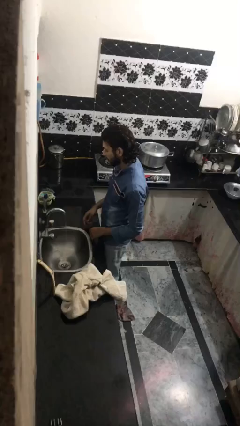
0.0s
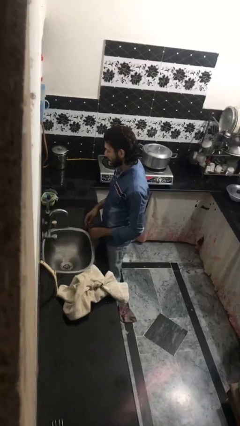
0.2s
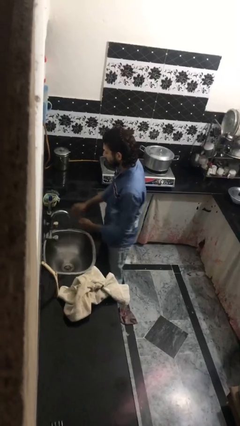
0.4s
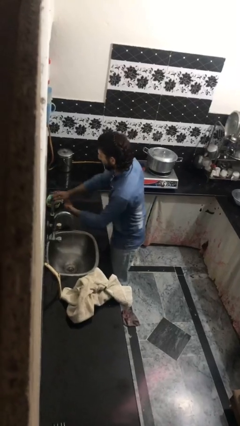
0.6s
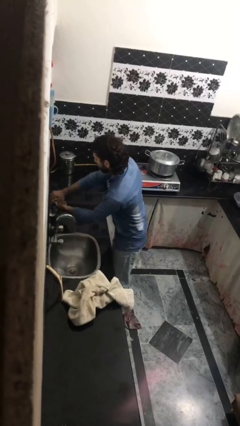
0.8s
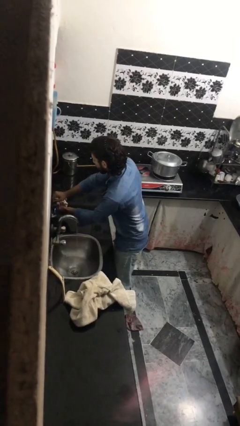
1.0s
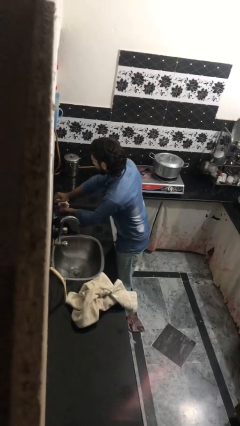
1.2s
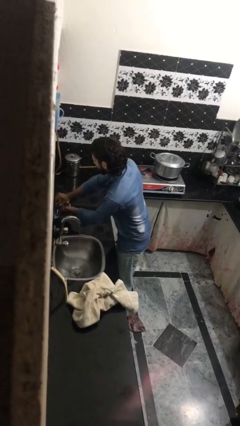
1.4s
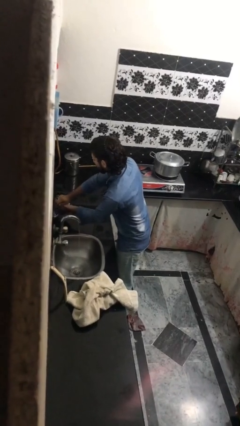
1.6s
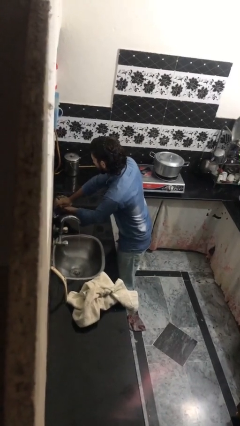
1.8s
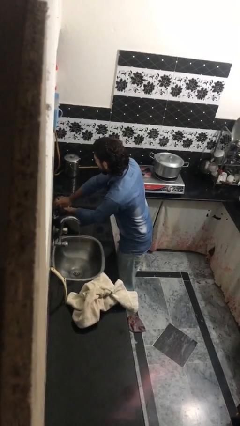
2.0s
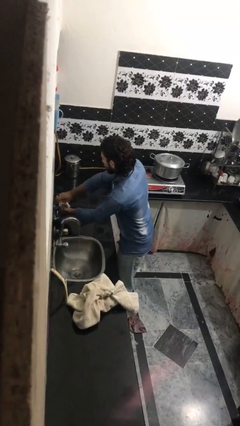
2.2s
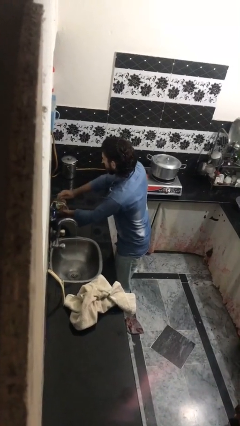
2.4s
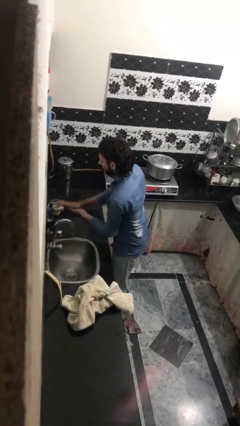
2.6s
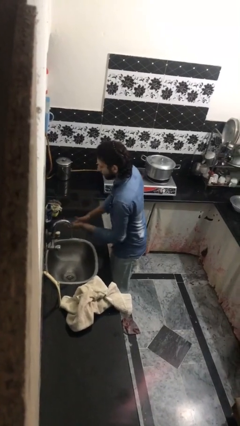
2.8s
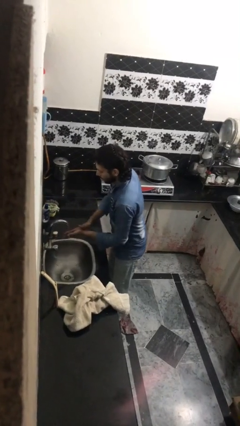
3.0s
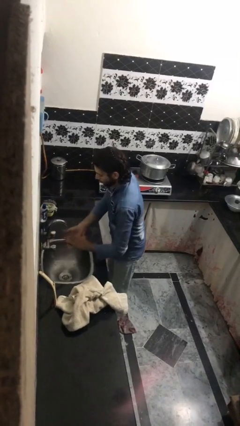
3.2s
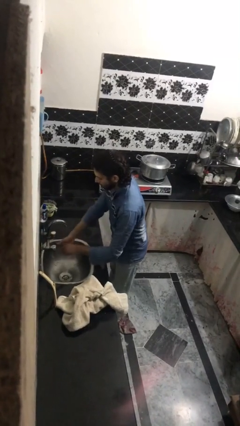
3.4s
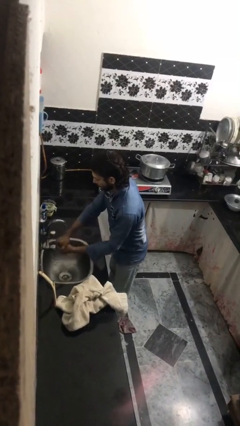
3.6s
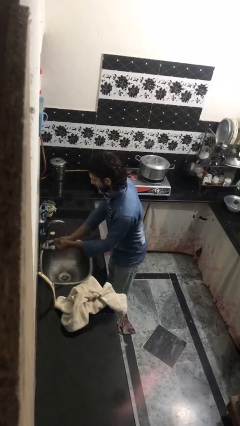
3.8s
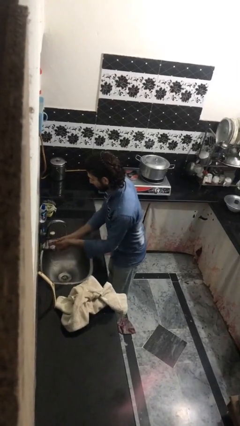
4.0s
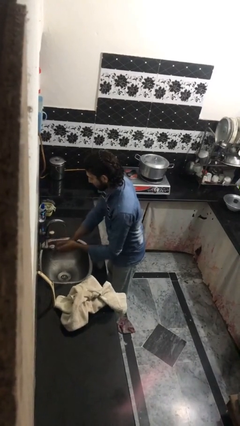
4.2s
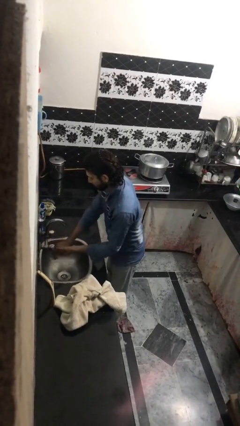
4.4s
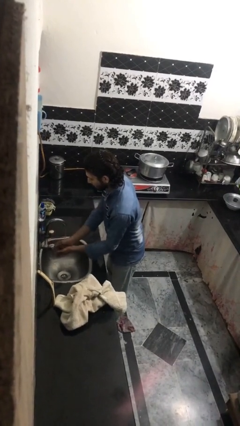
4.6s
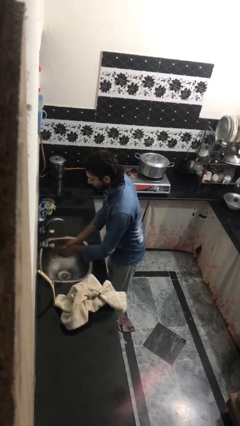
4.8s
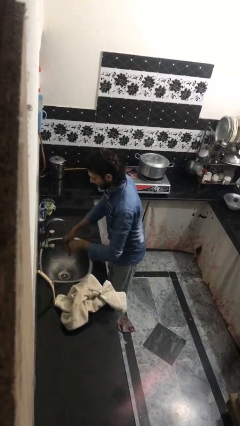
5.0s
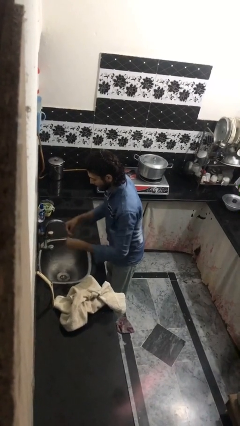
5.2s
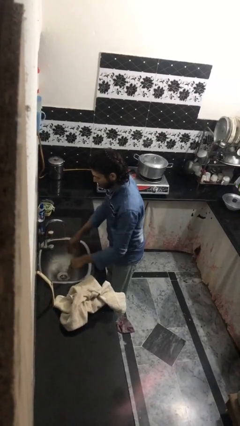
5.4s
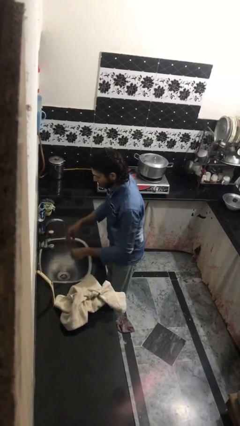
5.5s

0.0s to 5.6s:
person washes hands

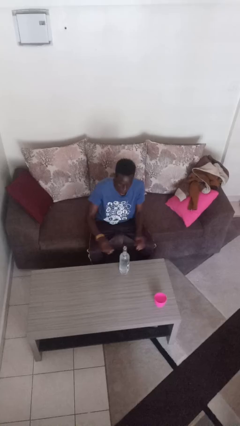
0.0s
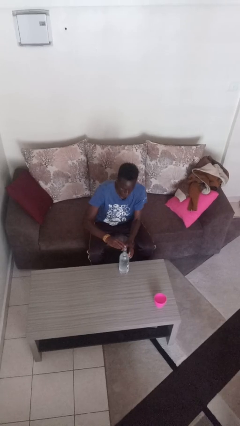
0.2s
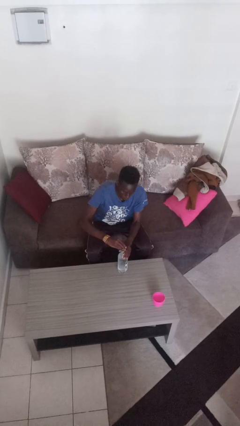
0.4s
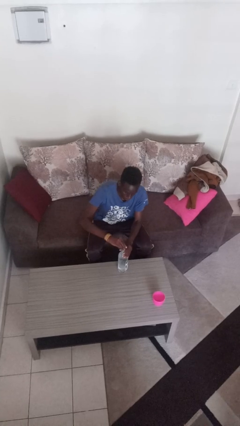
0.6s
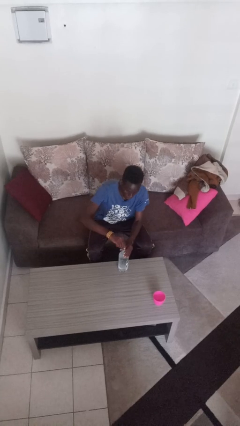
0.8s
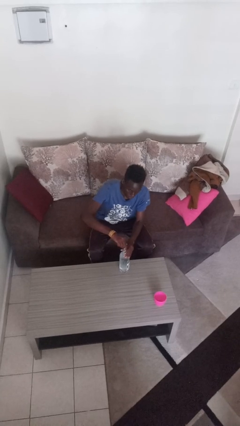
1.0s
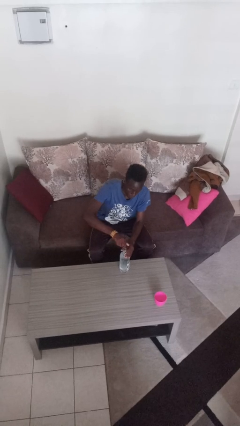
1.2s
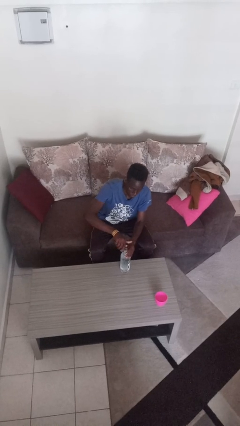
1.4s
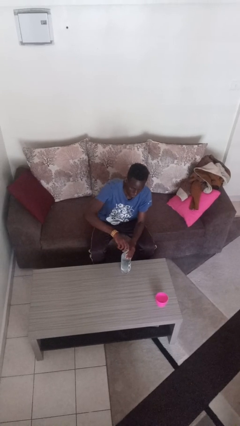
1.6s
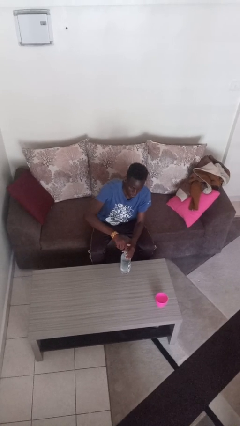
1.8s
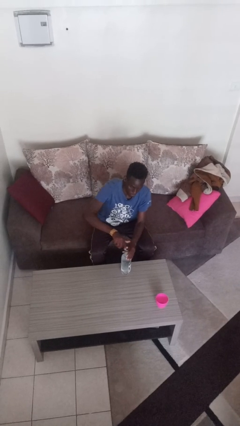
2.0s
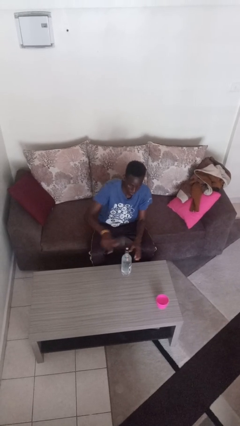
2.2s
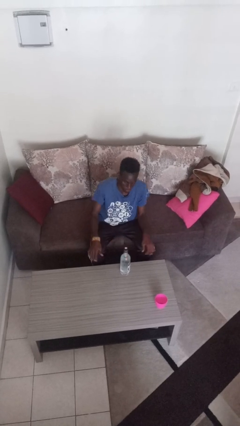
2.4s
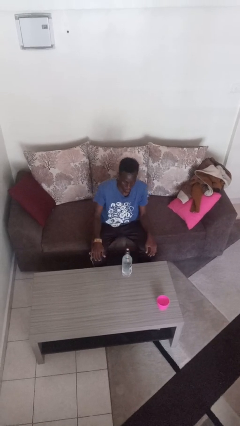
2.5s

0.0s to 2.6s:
person screws lid to bottle

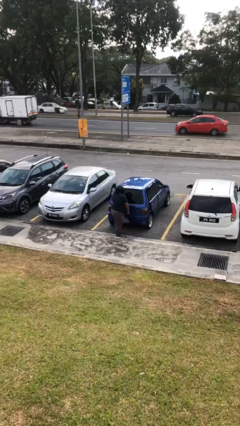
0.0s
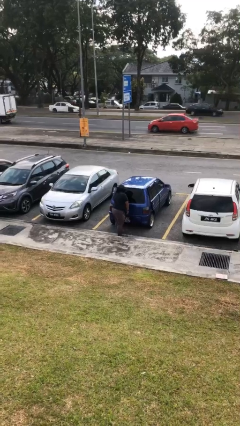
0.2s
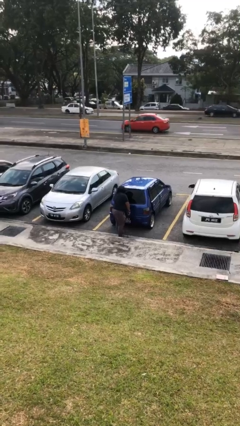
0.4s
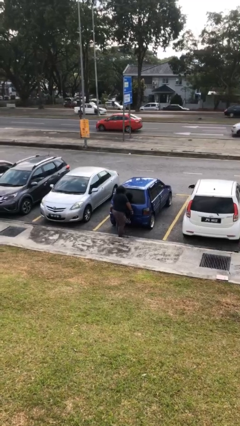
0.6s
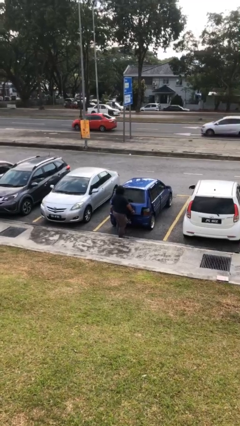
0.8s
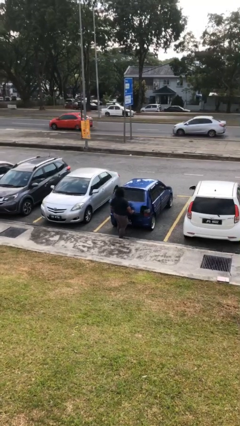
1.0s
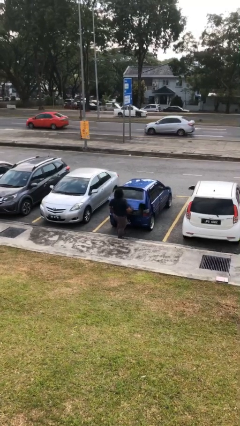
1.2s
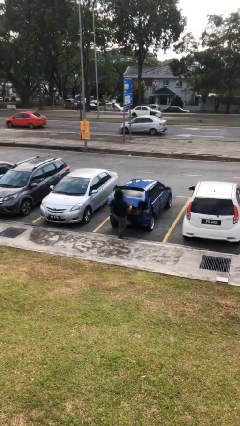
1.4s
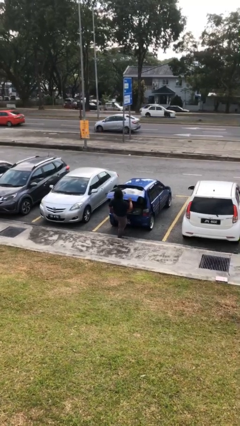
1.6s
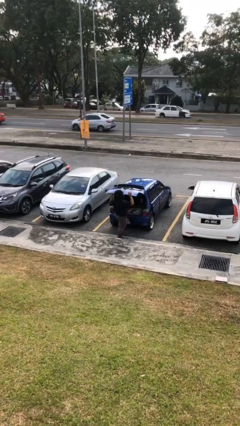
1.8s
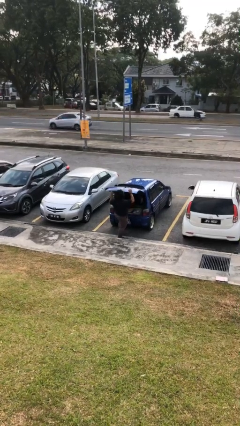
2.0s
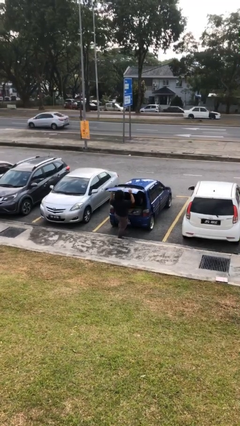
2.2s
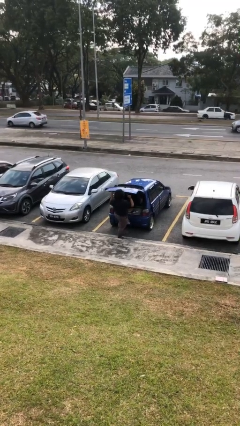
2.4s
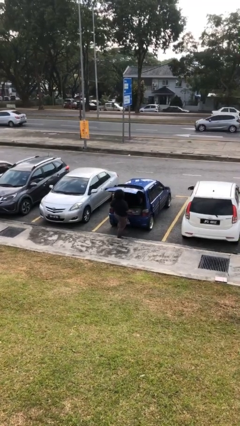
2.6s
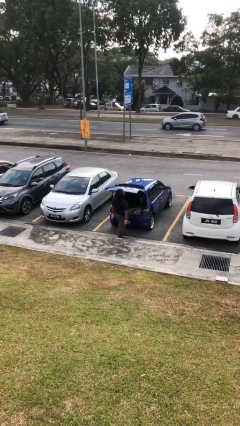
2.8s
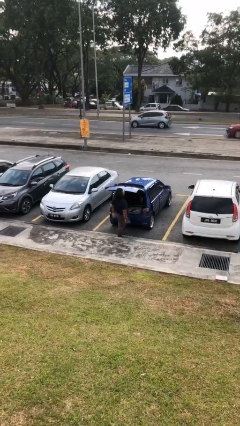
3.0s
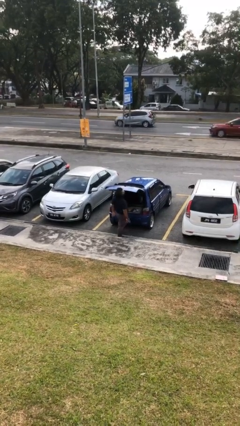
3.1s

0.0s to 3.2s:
person opens car trunk

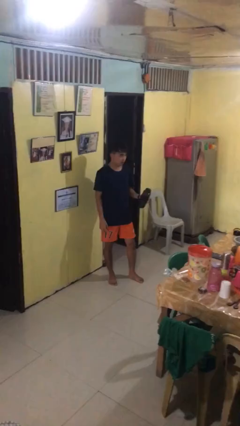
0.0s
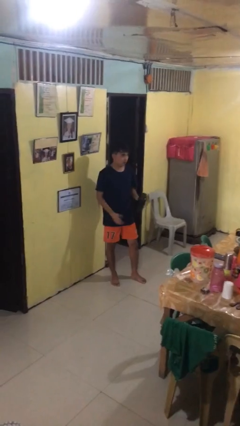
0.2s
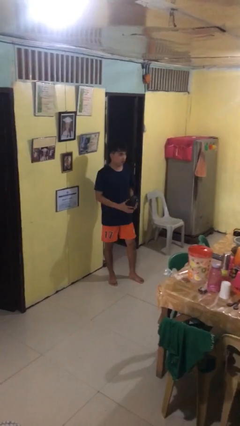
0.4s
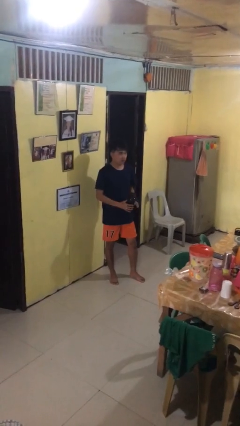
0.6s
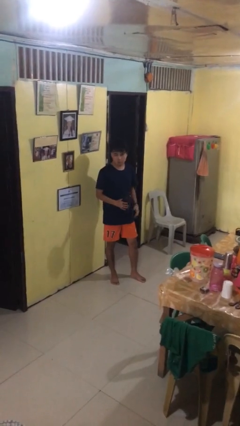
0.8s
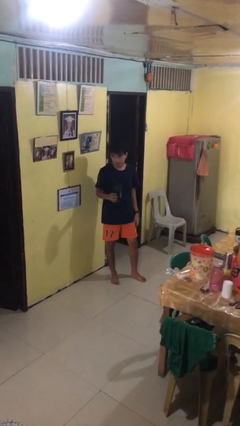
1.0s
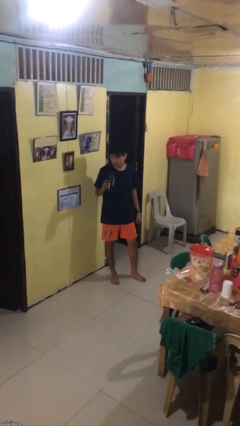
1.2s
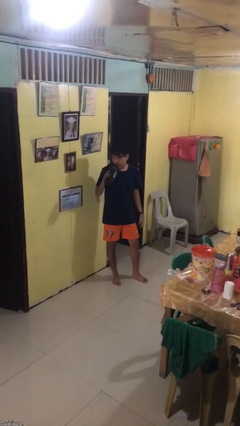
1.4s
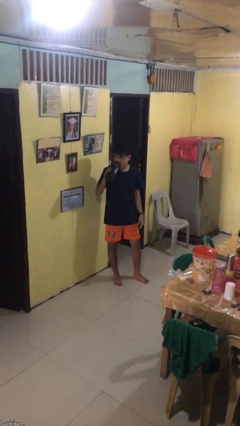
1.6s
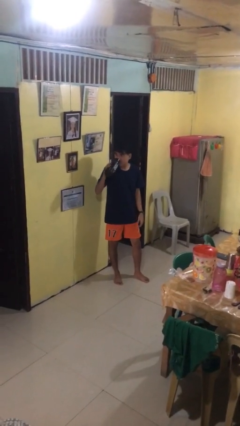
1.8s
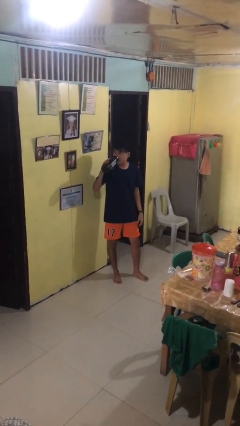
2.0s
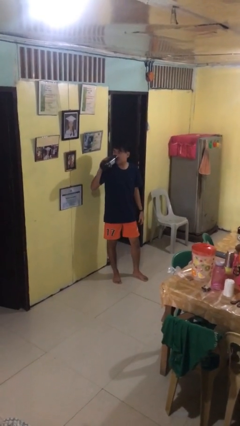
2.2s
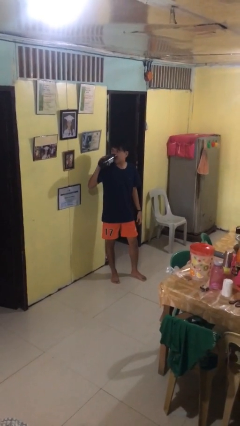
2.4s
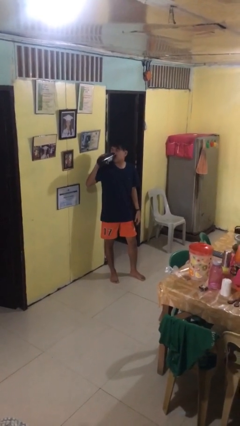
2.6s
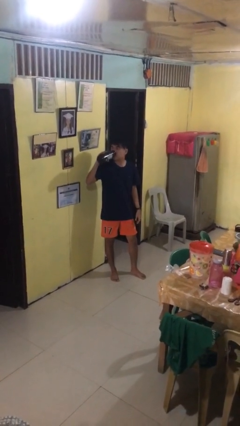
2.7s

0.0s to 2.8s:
person drinks from bottle

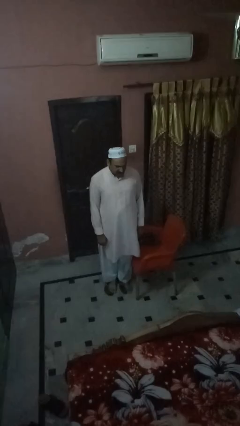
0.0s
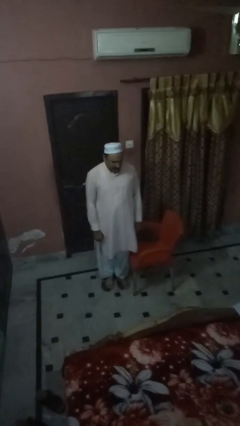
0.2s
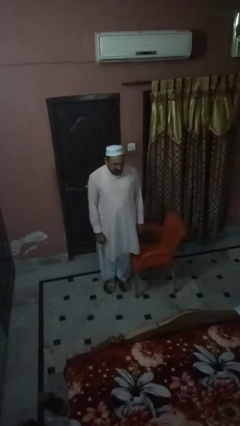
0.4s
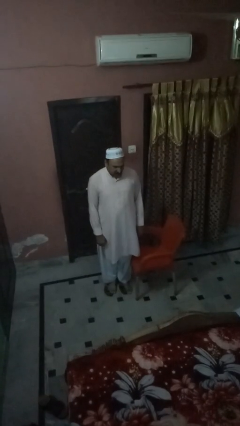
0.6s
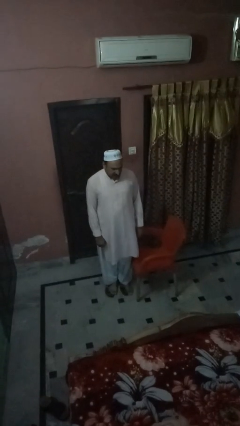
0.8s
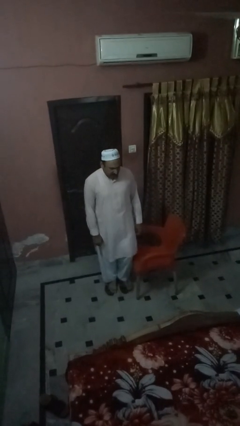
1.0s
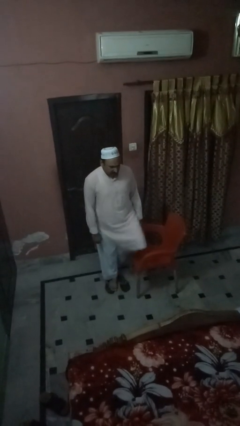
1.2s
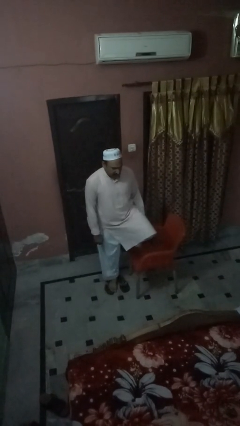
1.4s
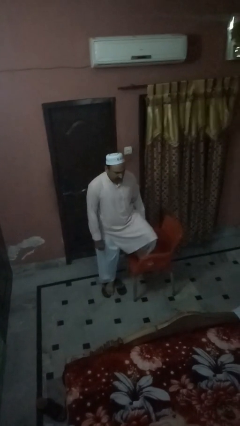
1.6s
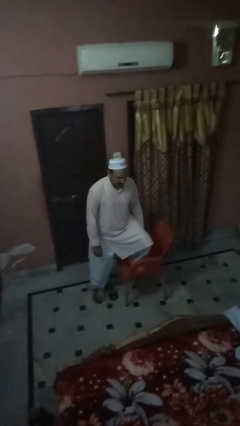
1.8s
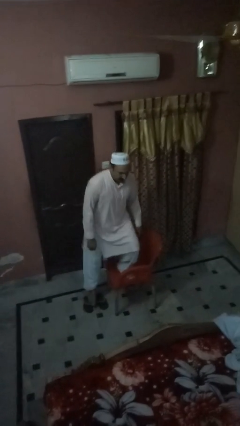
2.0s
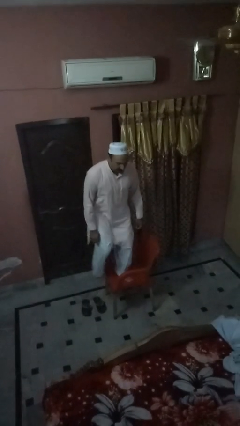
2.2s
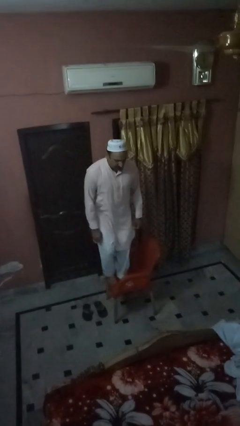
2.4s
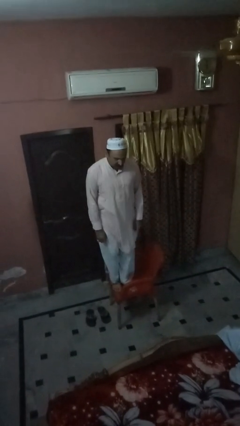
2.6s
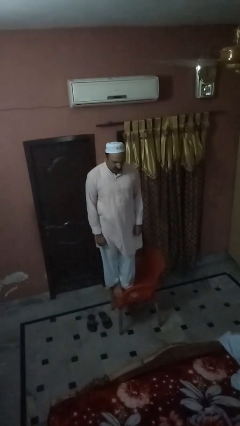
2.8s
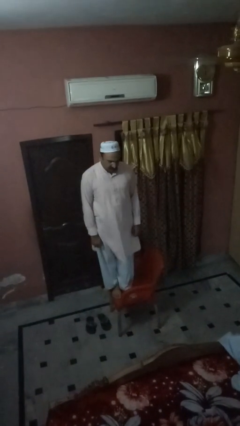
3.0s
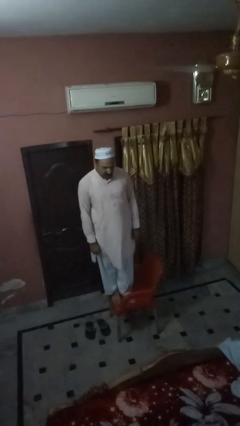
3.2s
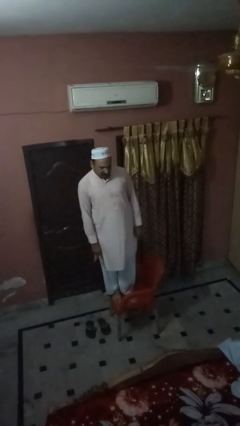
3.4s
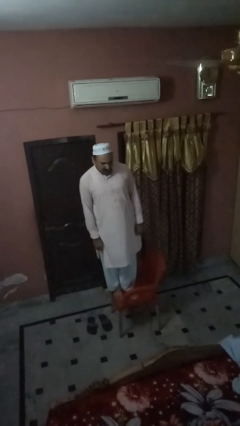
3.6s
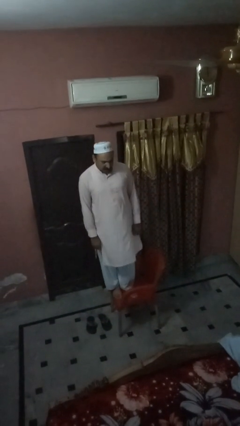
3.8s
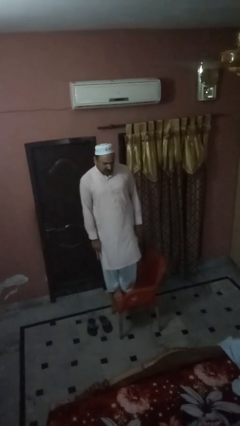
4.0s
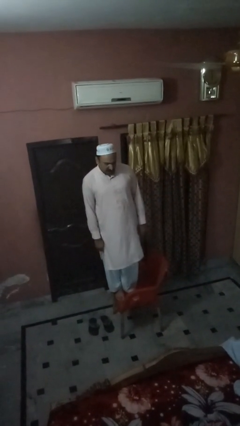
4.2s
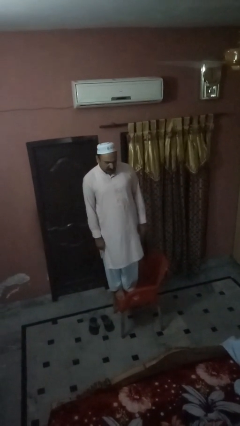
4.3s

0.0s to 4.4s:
person climbs on chair
